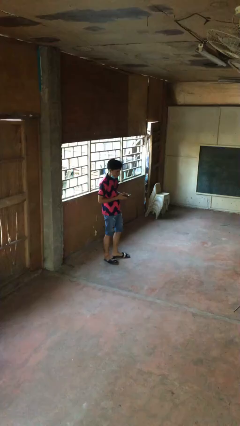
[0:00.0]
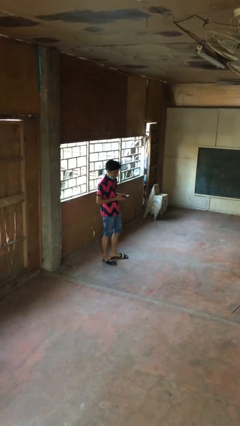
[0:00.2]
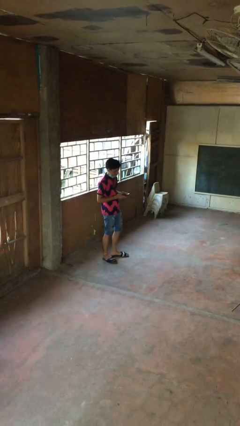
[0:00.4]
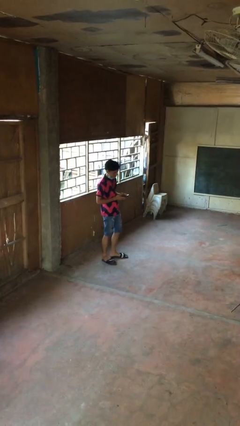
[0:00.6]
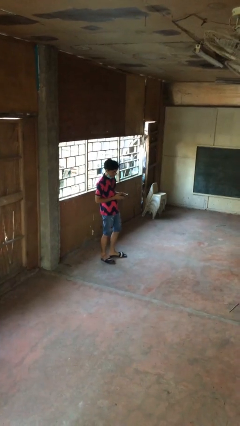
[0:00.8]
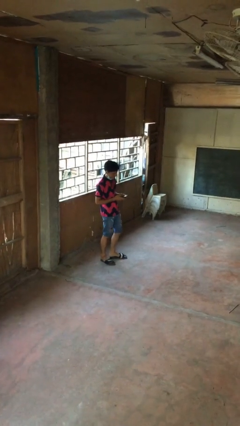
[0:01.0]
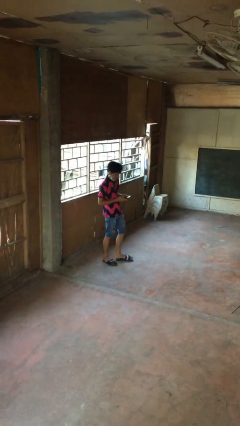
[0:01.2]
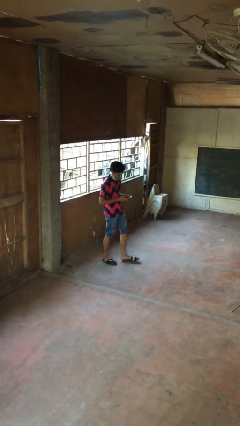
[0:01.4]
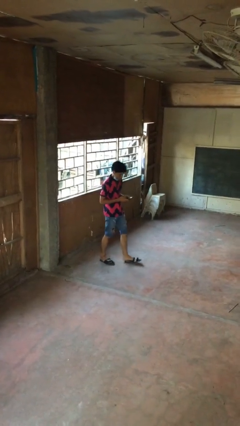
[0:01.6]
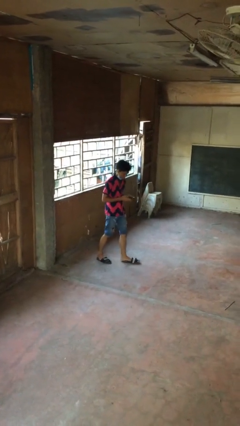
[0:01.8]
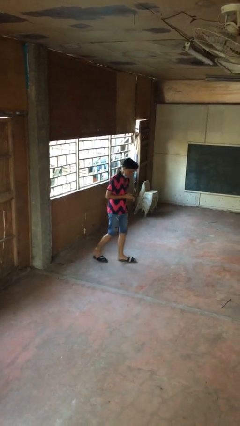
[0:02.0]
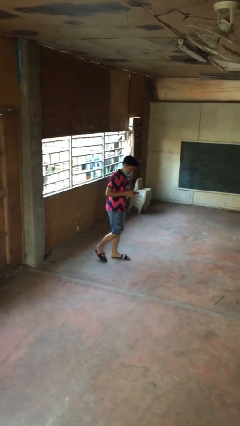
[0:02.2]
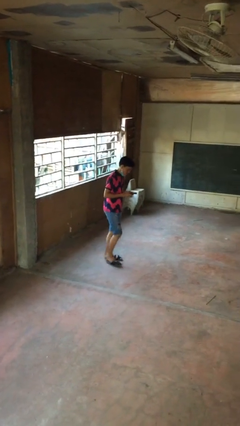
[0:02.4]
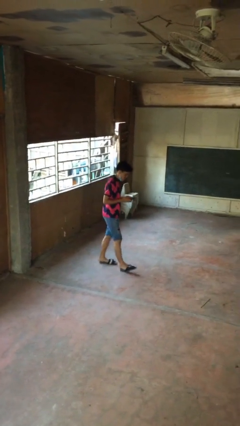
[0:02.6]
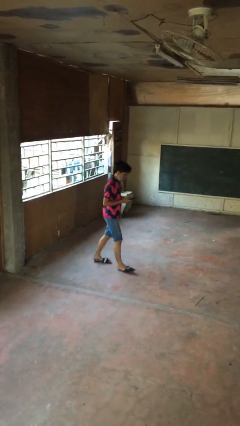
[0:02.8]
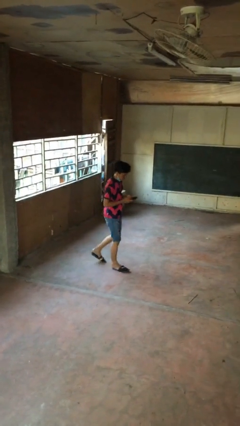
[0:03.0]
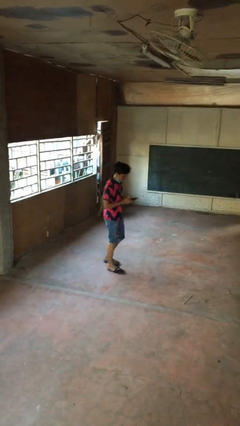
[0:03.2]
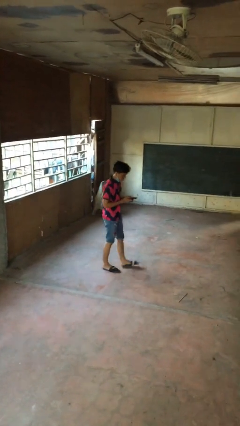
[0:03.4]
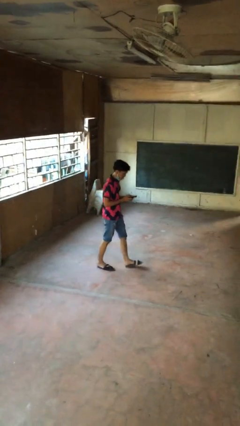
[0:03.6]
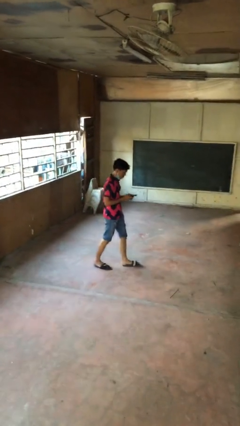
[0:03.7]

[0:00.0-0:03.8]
person texts on phone

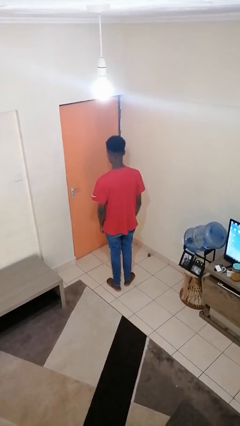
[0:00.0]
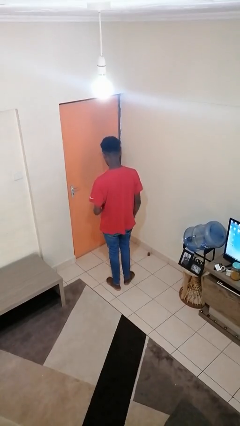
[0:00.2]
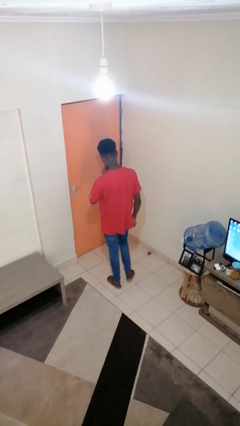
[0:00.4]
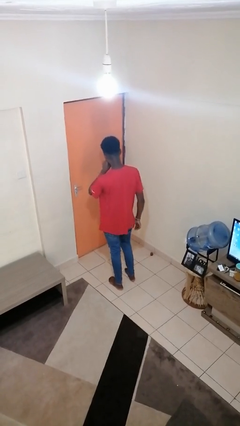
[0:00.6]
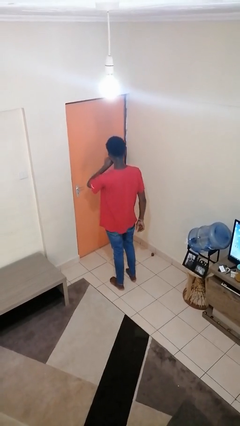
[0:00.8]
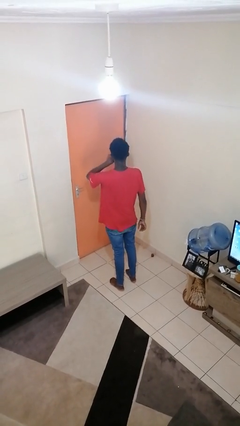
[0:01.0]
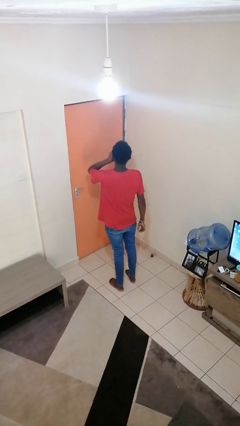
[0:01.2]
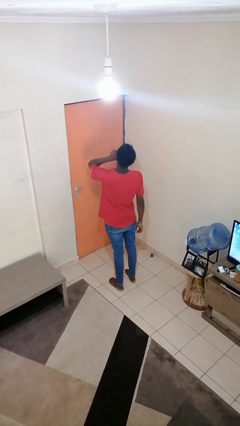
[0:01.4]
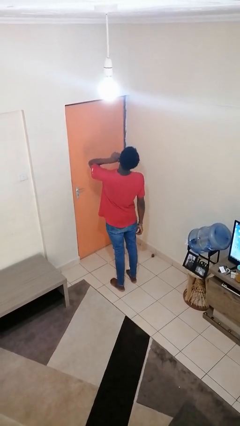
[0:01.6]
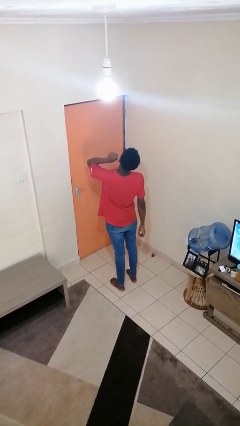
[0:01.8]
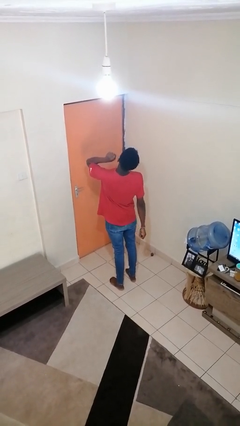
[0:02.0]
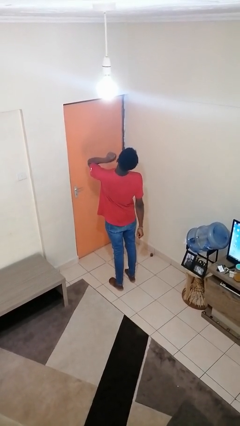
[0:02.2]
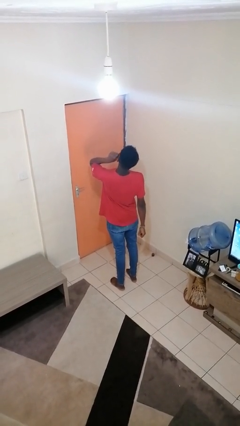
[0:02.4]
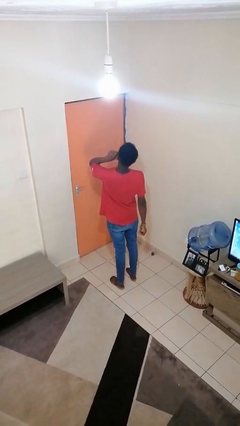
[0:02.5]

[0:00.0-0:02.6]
person yawns

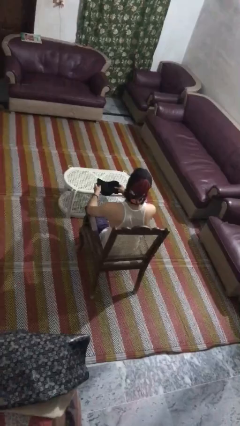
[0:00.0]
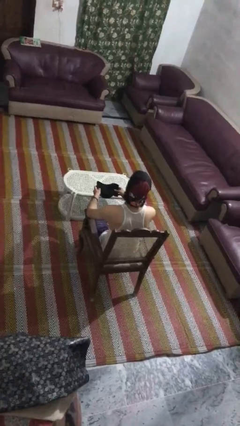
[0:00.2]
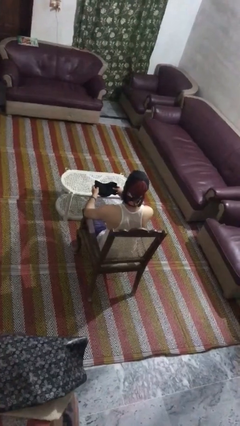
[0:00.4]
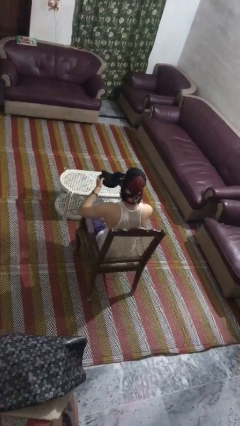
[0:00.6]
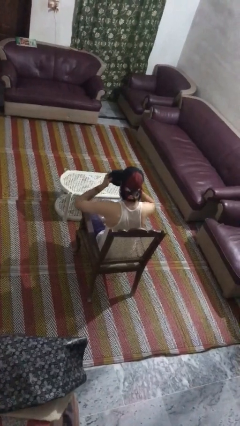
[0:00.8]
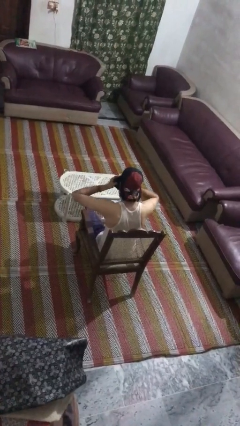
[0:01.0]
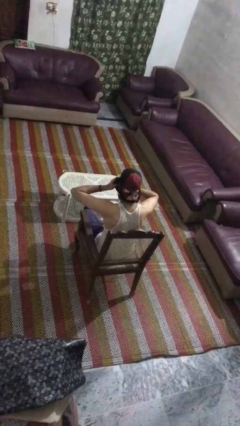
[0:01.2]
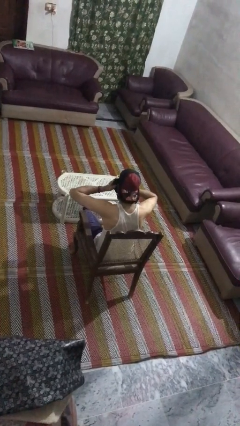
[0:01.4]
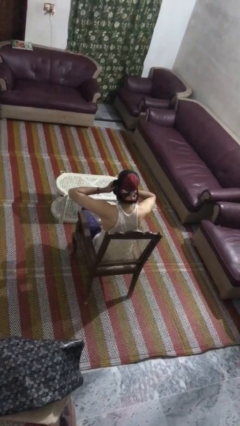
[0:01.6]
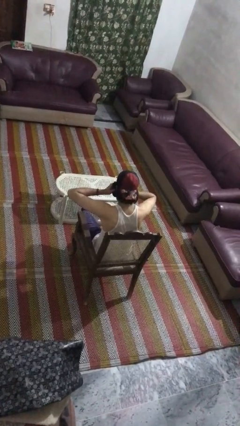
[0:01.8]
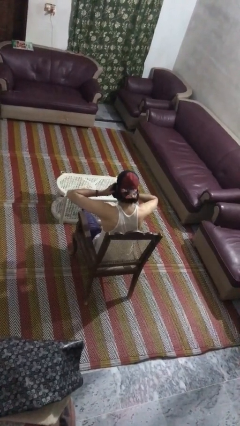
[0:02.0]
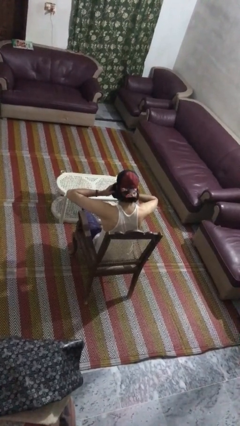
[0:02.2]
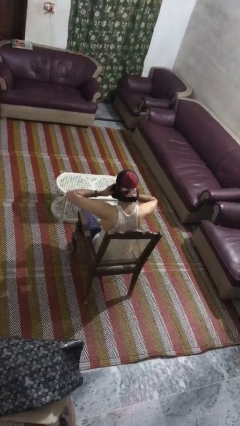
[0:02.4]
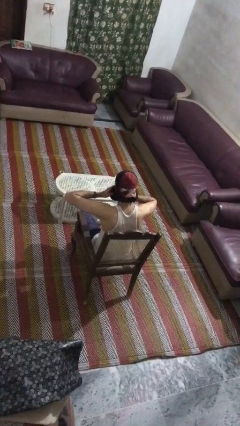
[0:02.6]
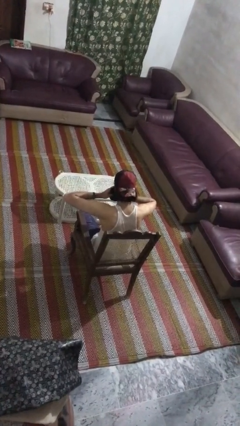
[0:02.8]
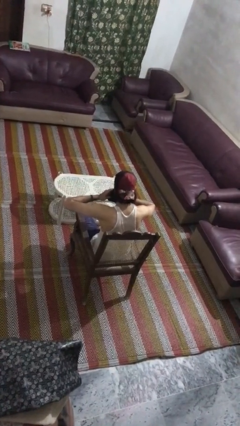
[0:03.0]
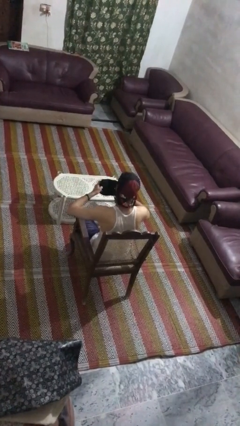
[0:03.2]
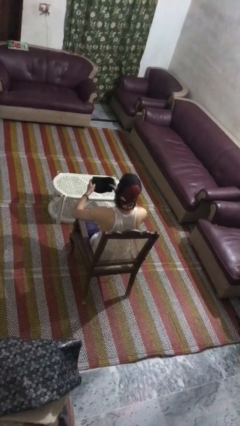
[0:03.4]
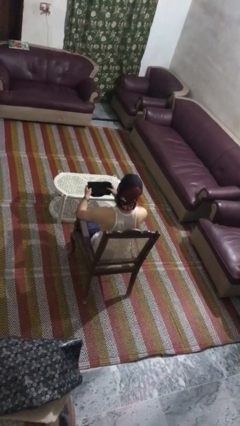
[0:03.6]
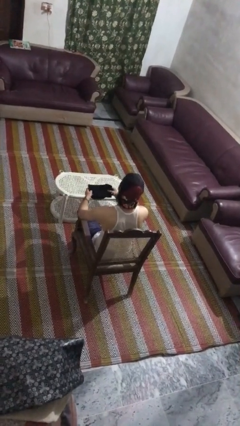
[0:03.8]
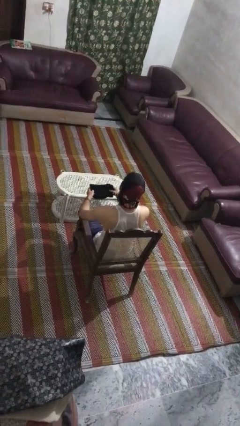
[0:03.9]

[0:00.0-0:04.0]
person blows nose

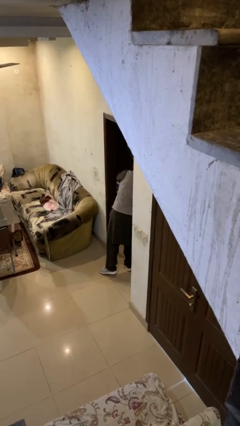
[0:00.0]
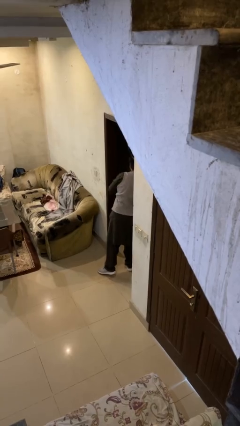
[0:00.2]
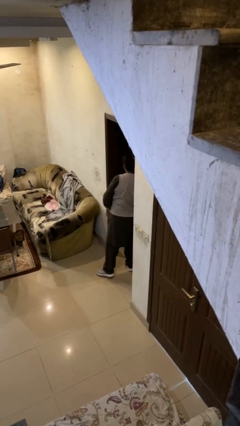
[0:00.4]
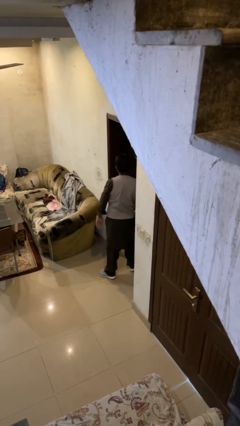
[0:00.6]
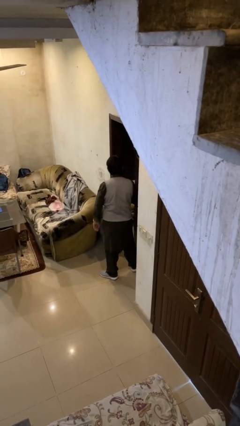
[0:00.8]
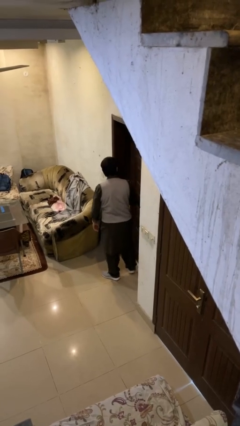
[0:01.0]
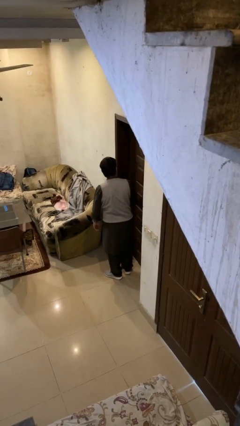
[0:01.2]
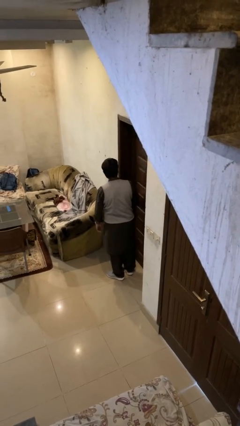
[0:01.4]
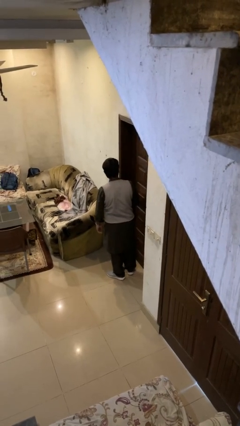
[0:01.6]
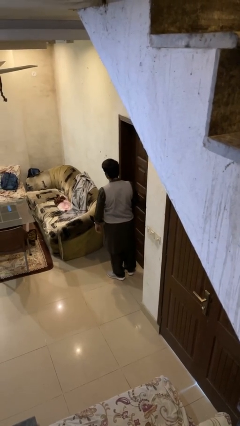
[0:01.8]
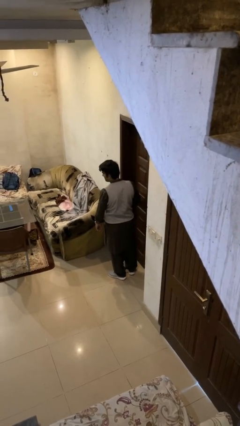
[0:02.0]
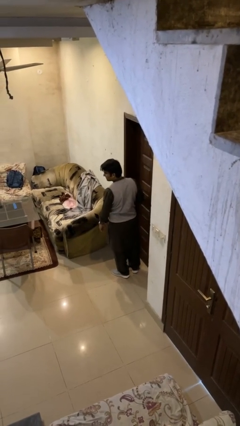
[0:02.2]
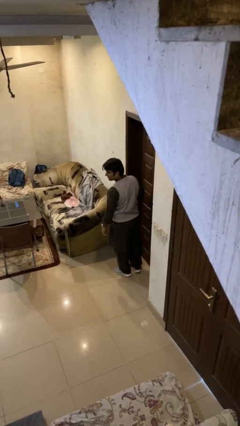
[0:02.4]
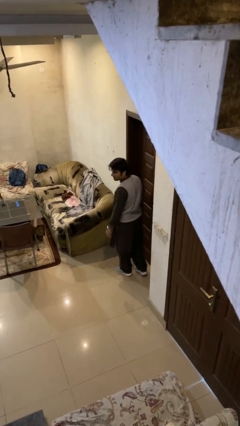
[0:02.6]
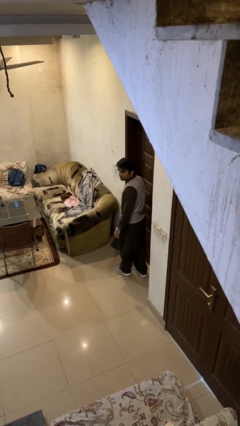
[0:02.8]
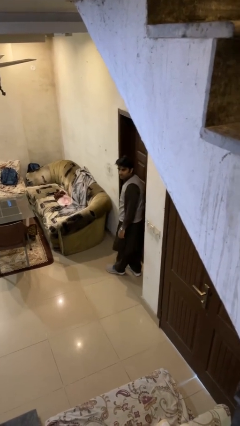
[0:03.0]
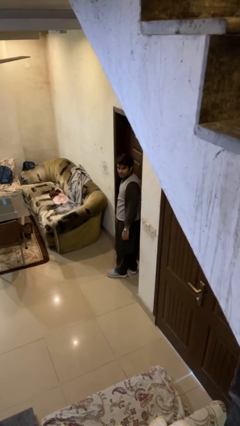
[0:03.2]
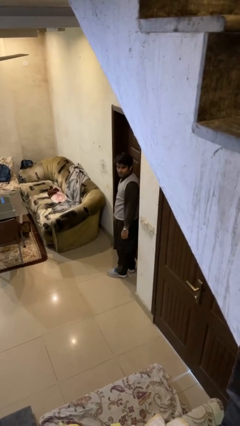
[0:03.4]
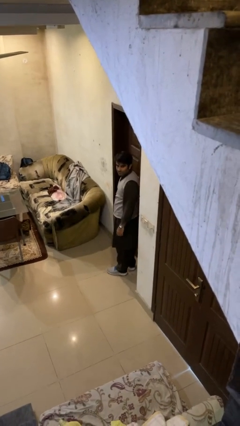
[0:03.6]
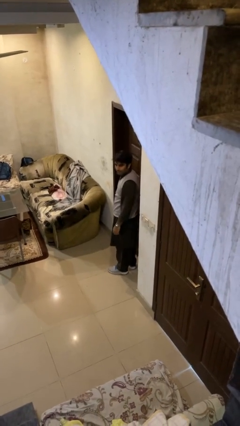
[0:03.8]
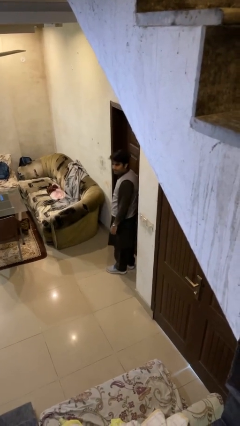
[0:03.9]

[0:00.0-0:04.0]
person closes facility door

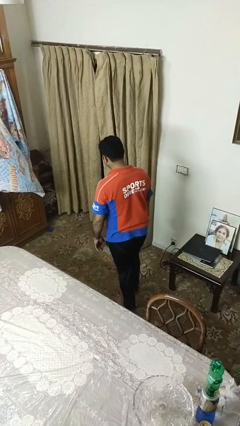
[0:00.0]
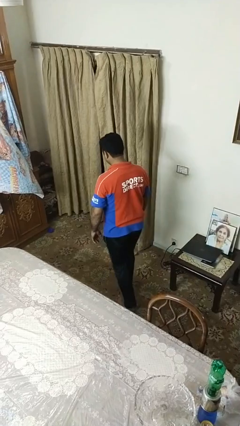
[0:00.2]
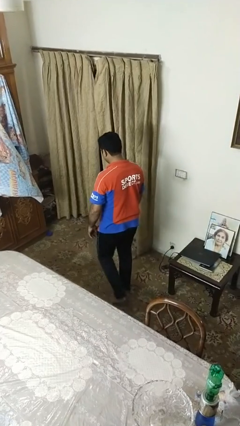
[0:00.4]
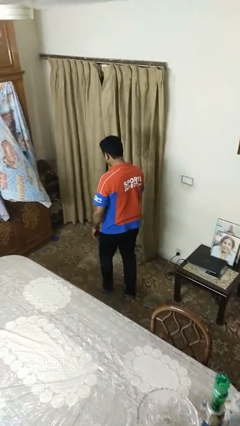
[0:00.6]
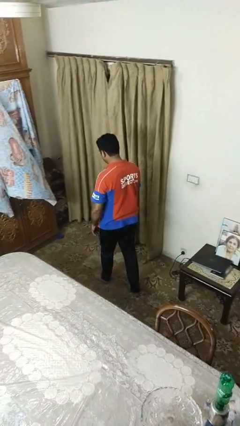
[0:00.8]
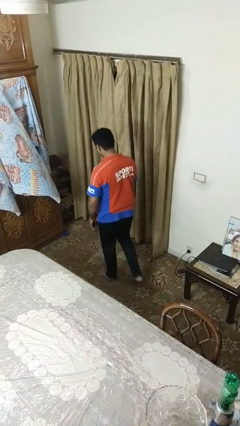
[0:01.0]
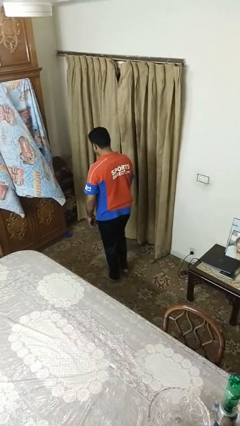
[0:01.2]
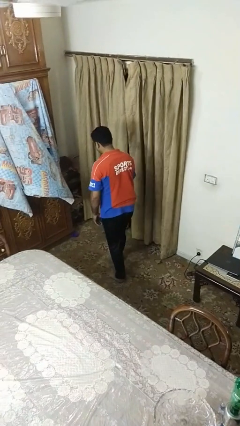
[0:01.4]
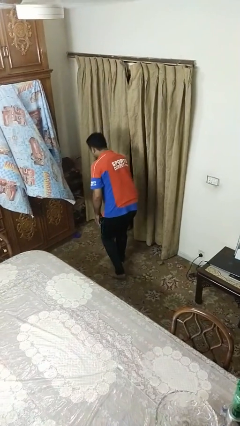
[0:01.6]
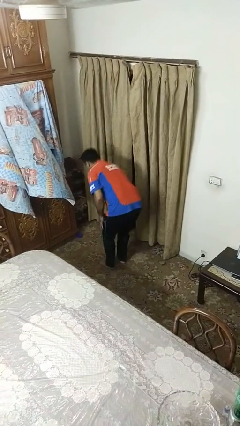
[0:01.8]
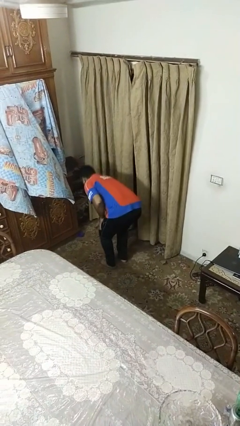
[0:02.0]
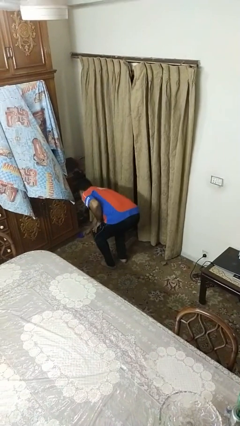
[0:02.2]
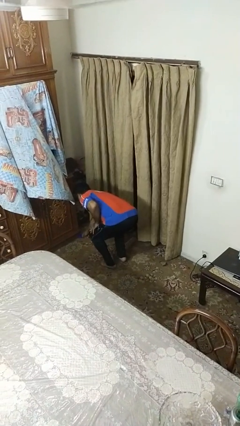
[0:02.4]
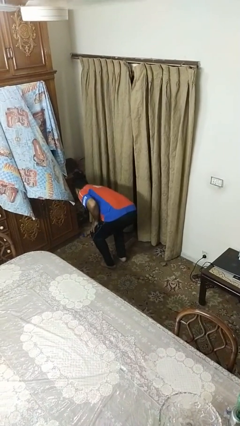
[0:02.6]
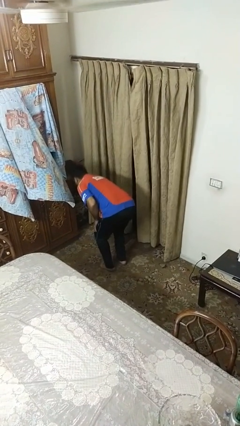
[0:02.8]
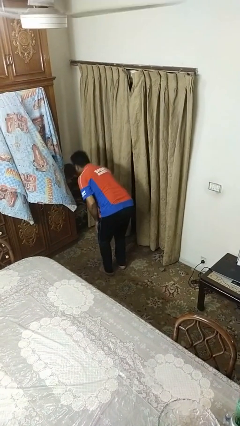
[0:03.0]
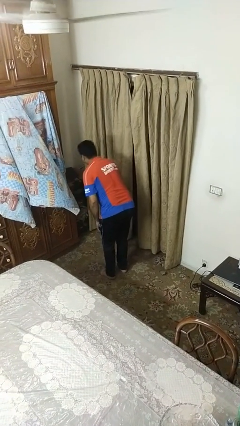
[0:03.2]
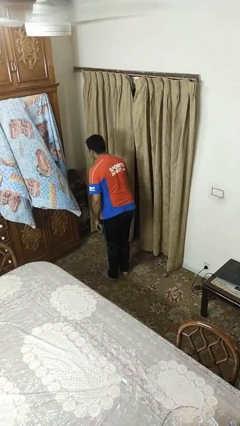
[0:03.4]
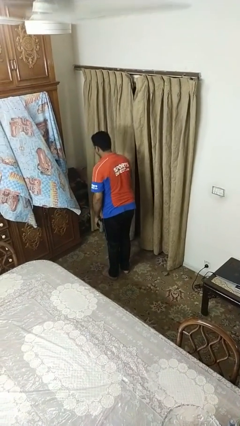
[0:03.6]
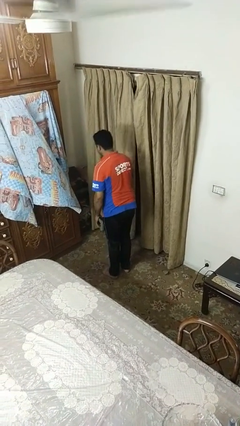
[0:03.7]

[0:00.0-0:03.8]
person picks up object from floor
